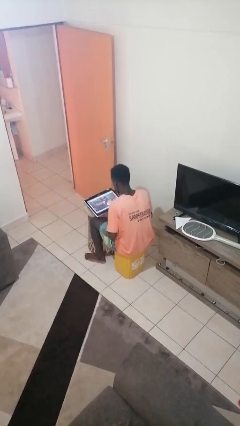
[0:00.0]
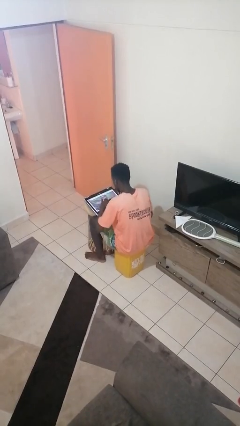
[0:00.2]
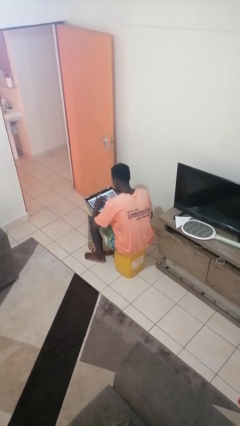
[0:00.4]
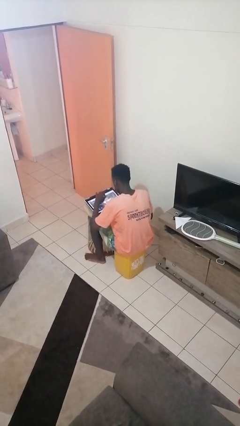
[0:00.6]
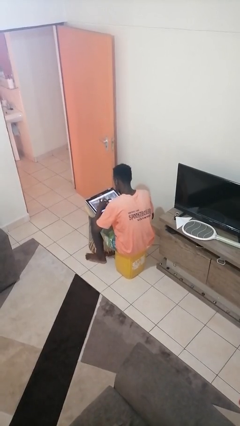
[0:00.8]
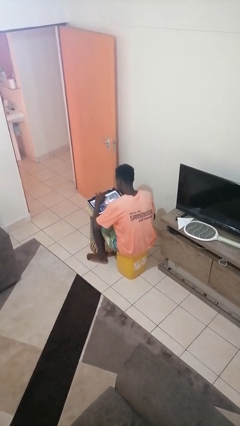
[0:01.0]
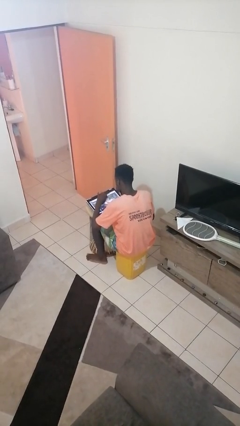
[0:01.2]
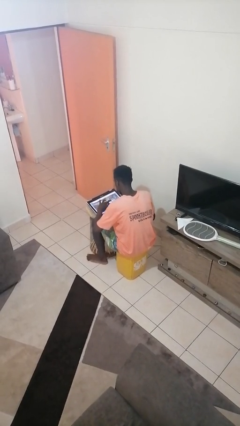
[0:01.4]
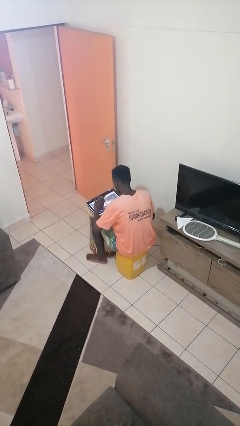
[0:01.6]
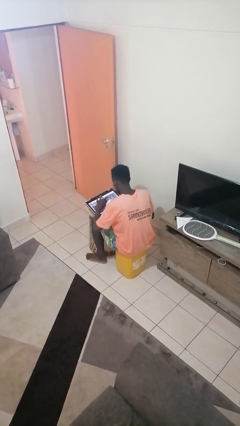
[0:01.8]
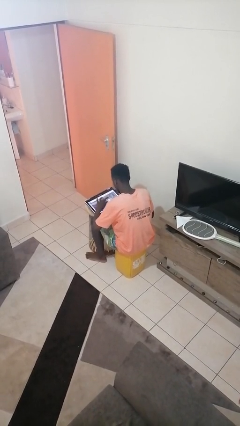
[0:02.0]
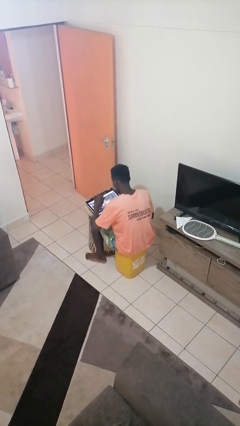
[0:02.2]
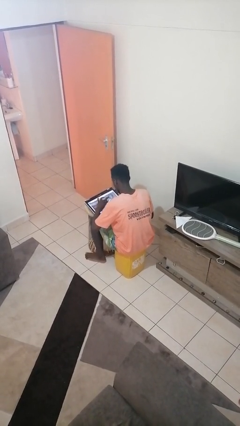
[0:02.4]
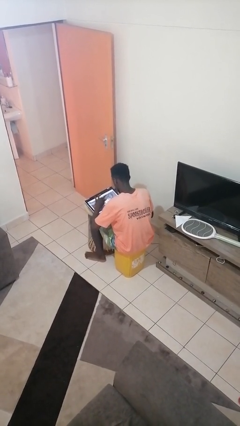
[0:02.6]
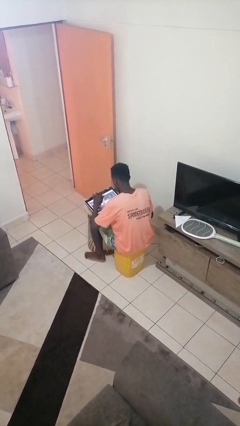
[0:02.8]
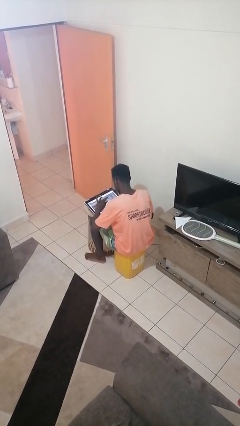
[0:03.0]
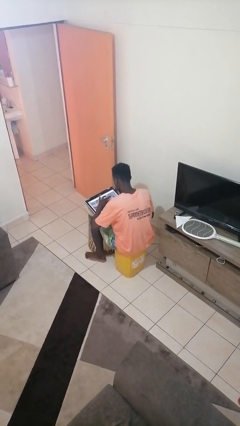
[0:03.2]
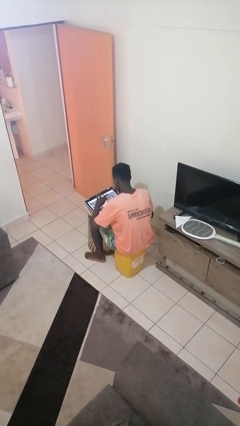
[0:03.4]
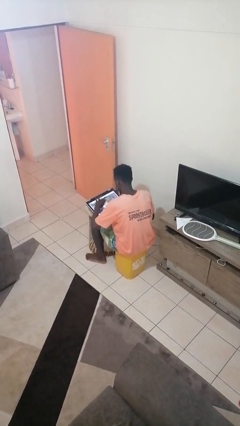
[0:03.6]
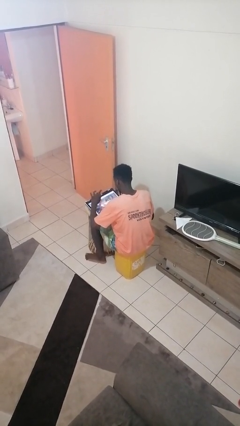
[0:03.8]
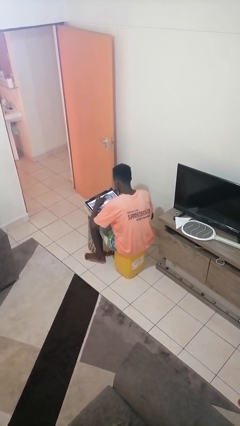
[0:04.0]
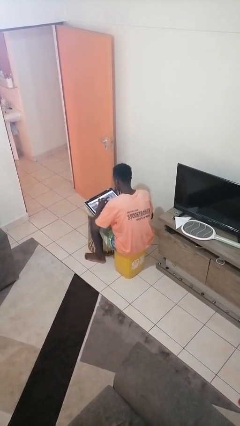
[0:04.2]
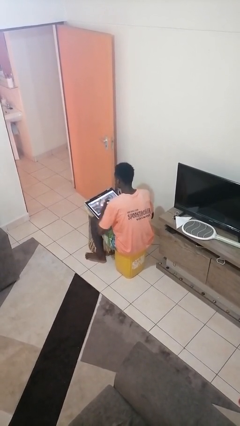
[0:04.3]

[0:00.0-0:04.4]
person interacts with tablet

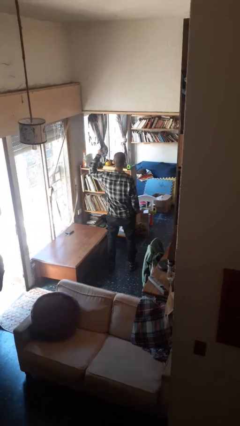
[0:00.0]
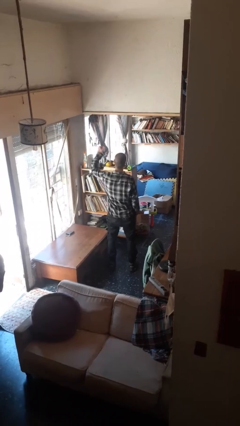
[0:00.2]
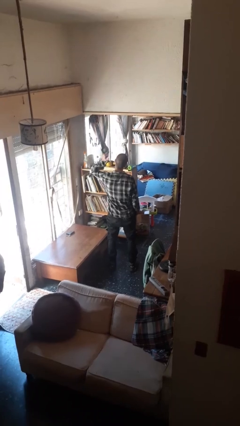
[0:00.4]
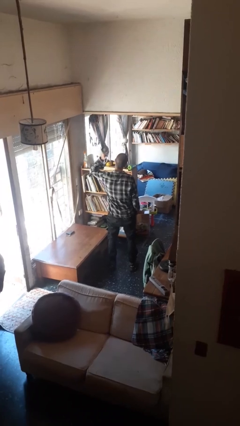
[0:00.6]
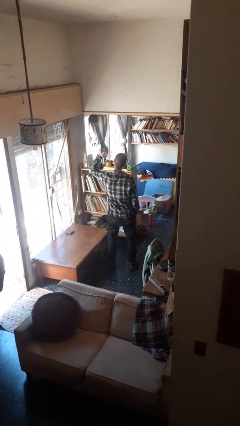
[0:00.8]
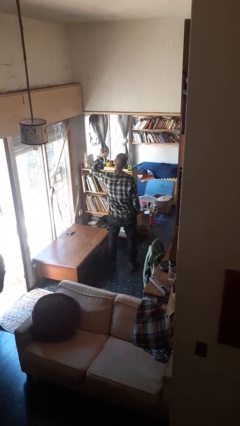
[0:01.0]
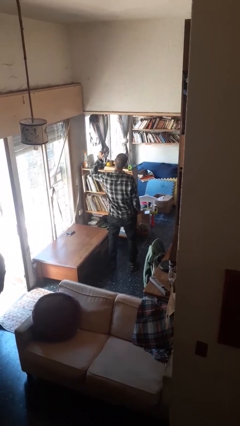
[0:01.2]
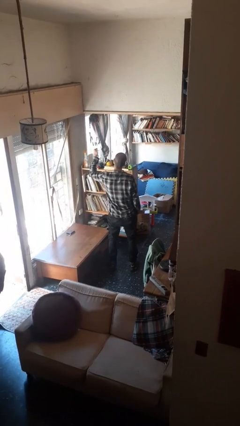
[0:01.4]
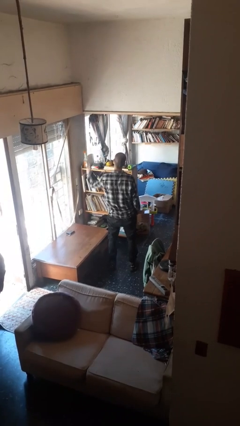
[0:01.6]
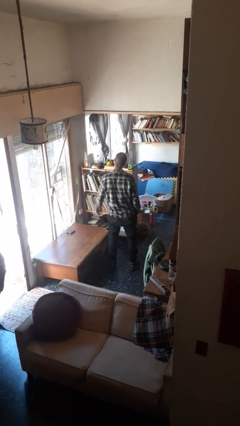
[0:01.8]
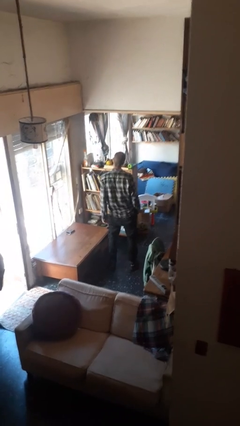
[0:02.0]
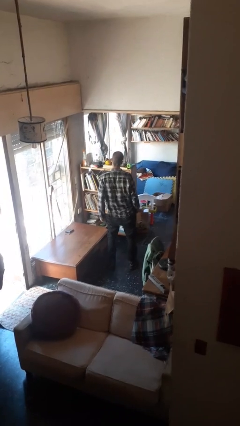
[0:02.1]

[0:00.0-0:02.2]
person gestures behind me

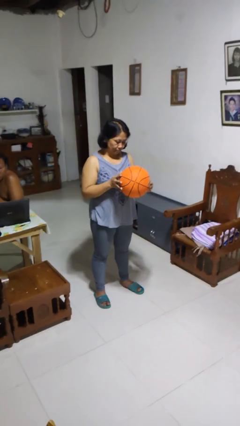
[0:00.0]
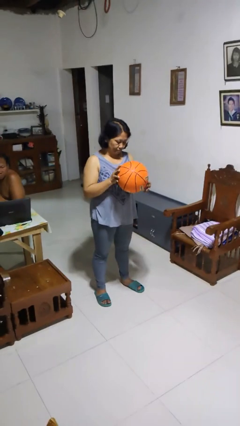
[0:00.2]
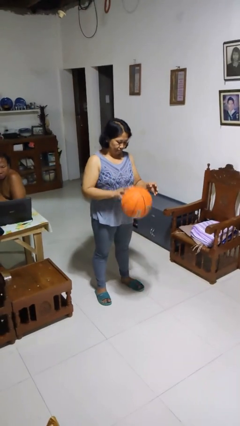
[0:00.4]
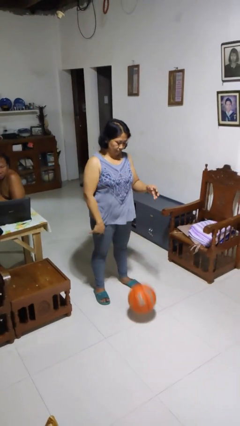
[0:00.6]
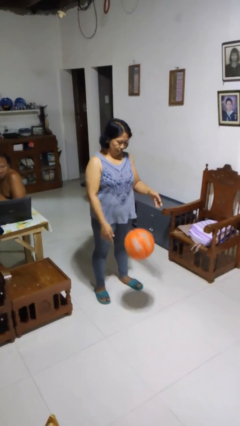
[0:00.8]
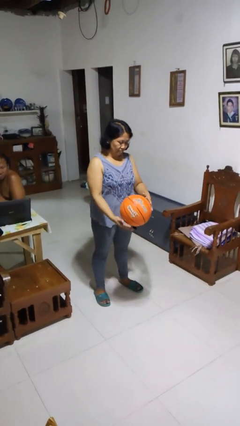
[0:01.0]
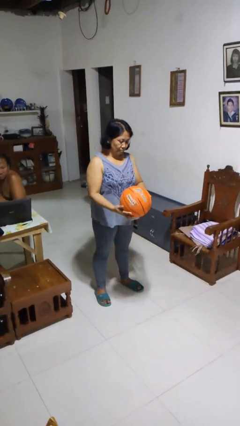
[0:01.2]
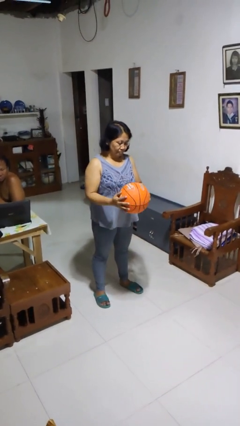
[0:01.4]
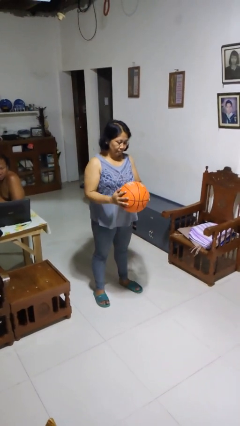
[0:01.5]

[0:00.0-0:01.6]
person bounces ball on floor

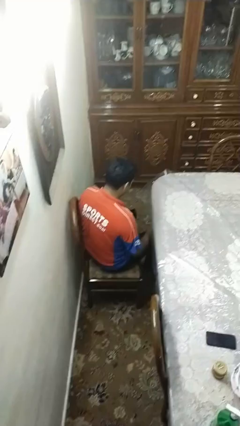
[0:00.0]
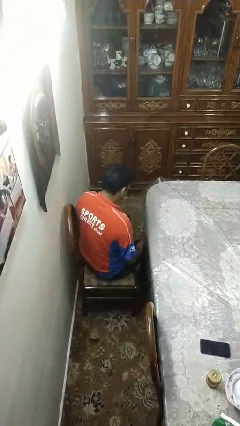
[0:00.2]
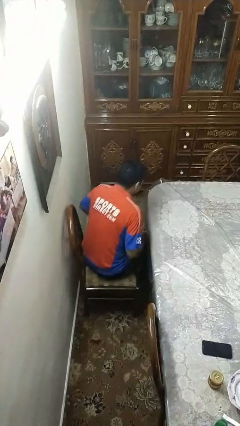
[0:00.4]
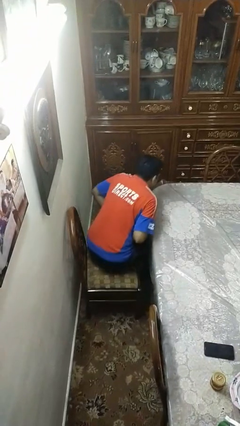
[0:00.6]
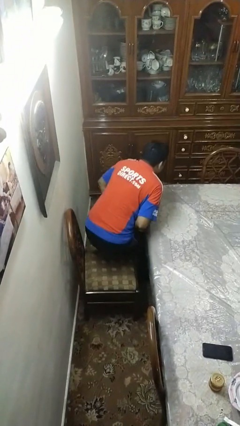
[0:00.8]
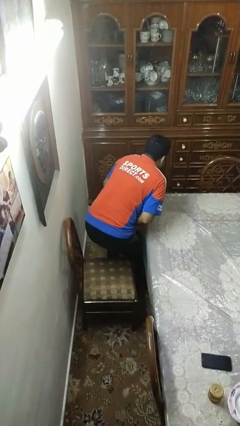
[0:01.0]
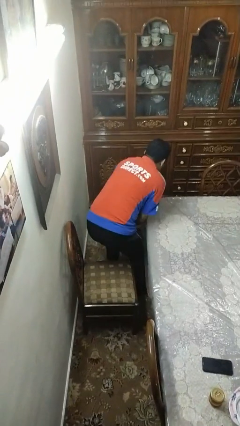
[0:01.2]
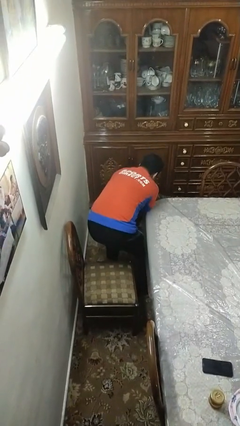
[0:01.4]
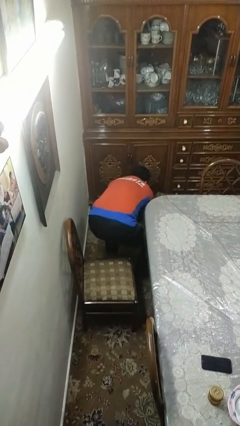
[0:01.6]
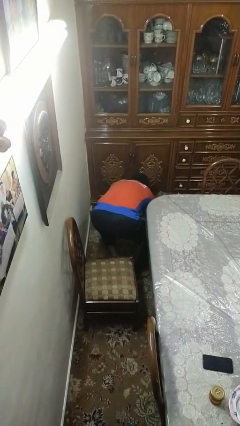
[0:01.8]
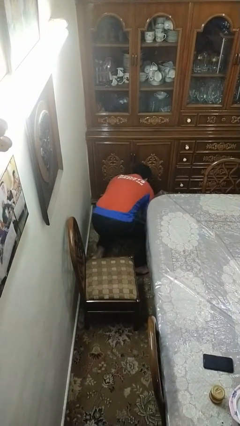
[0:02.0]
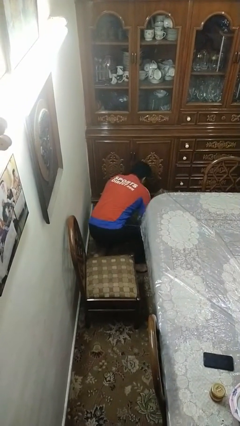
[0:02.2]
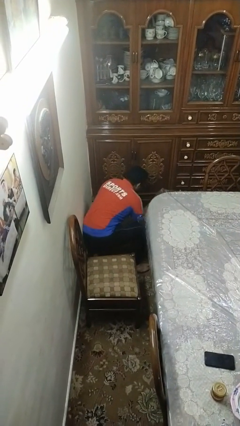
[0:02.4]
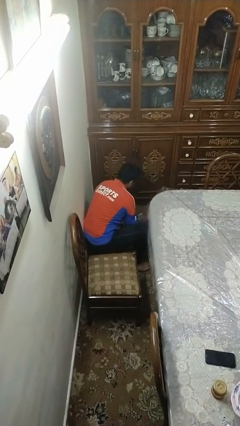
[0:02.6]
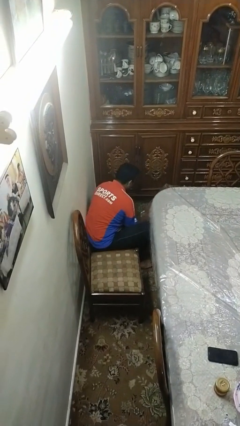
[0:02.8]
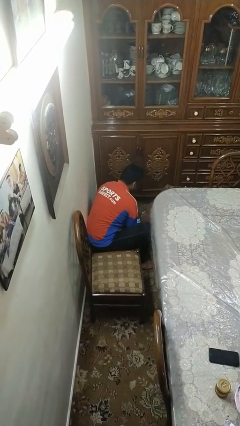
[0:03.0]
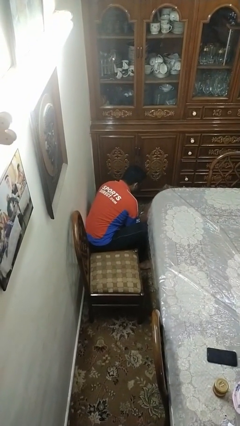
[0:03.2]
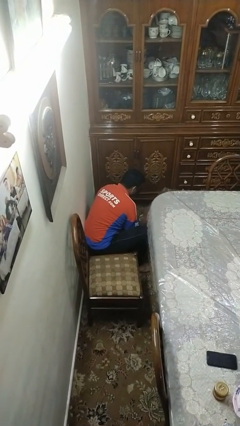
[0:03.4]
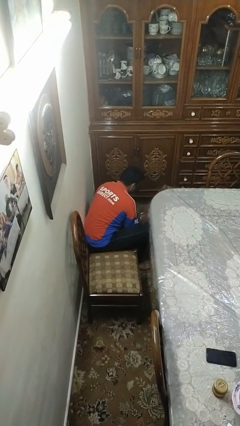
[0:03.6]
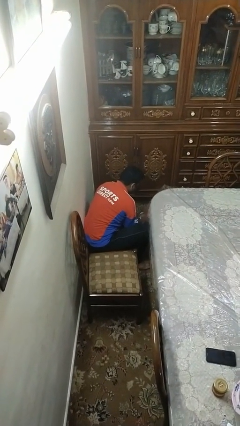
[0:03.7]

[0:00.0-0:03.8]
person falls from chair

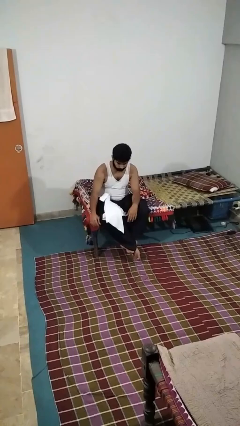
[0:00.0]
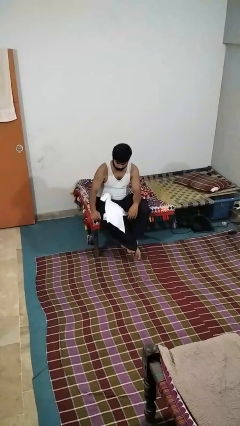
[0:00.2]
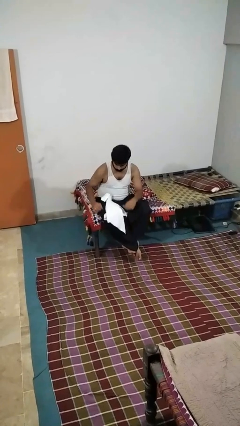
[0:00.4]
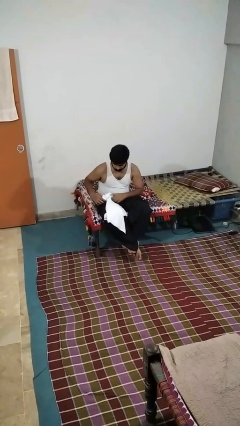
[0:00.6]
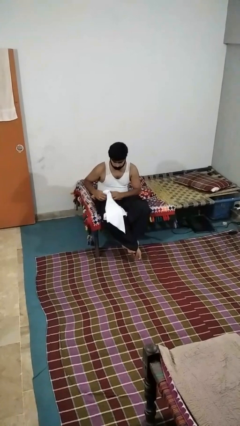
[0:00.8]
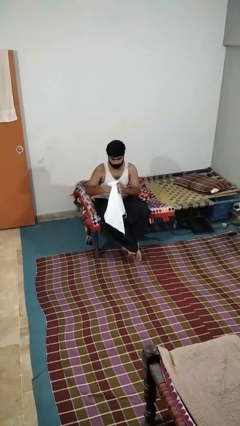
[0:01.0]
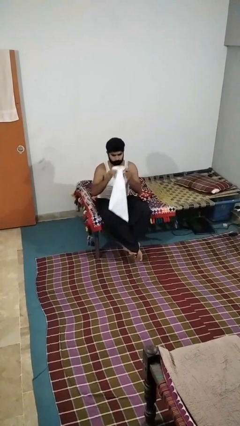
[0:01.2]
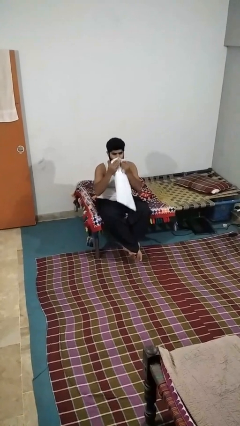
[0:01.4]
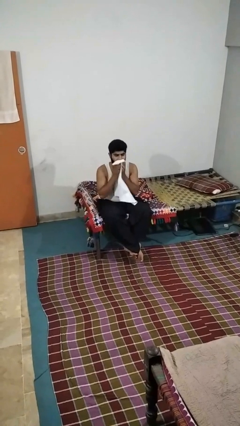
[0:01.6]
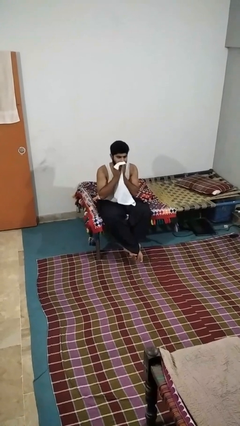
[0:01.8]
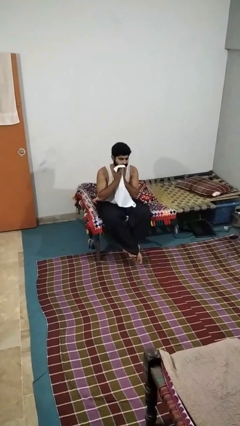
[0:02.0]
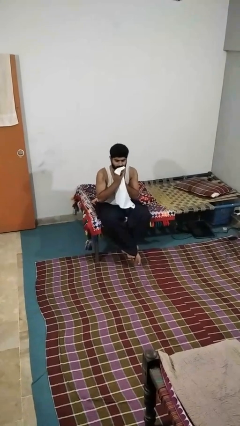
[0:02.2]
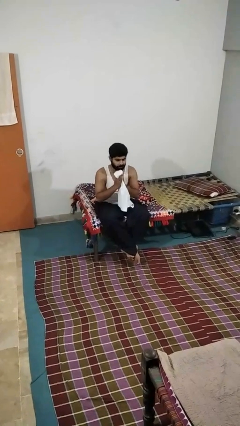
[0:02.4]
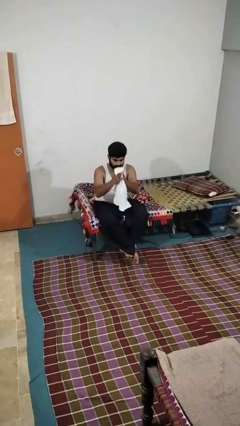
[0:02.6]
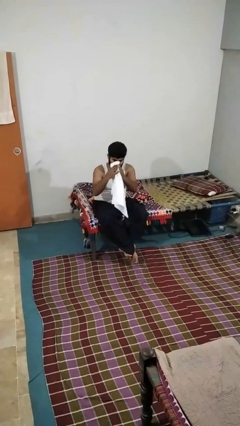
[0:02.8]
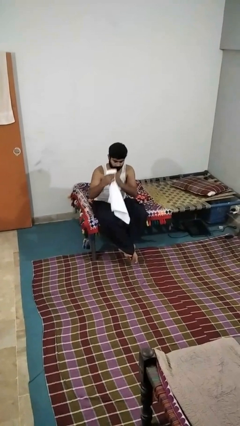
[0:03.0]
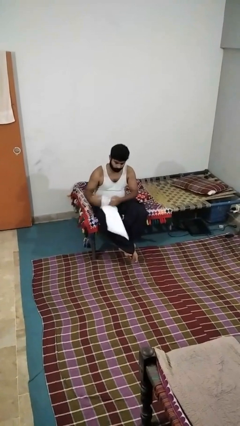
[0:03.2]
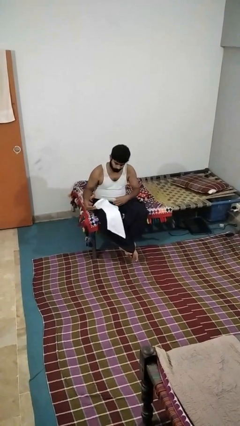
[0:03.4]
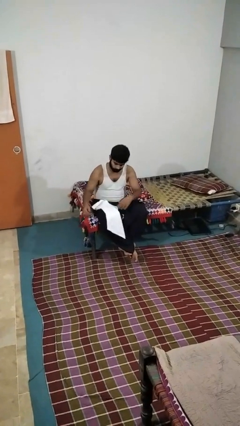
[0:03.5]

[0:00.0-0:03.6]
person wipes mouth with napkin

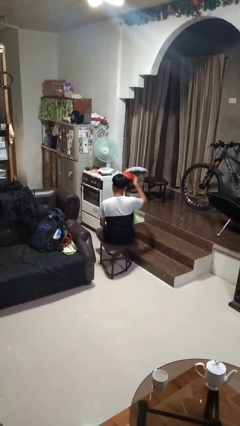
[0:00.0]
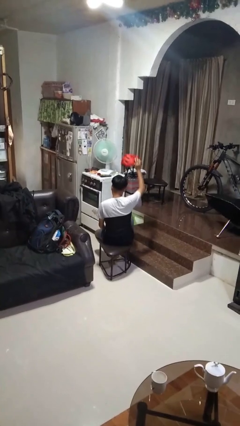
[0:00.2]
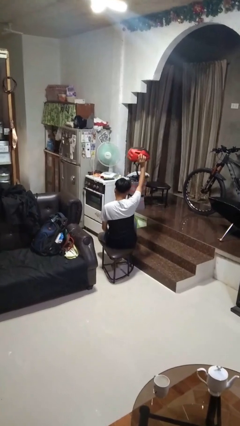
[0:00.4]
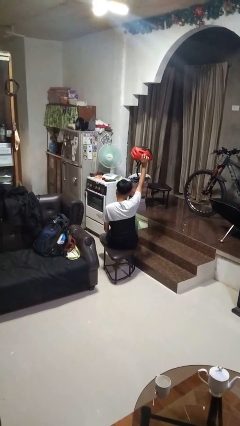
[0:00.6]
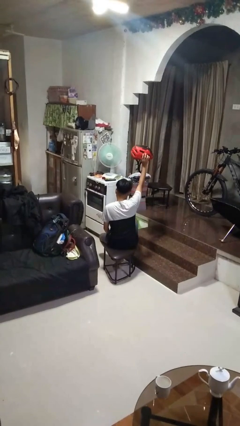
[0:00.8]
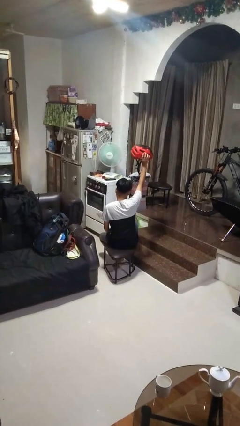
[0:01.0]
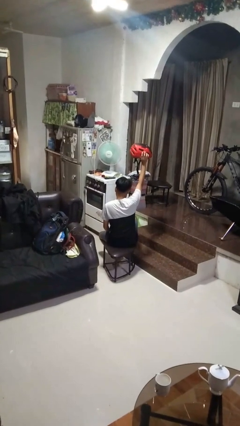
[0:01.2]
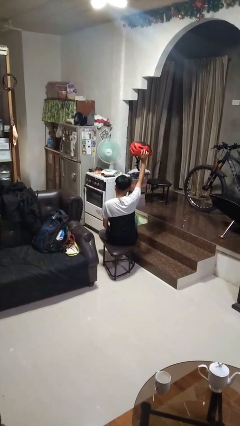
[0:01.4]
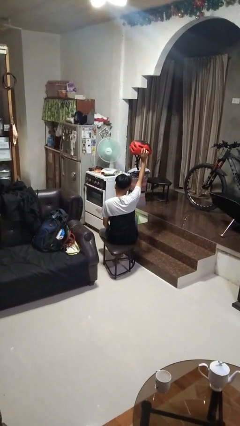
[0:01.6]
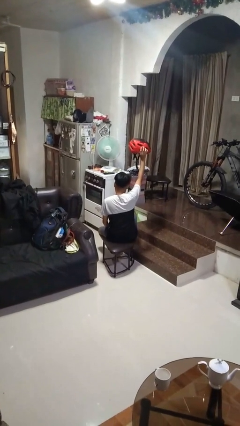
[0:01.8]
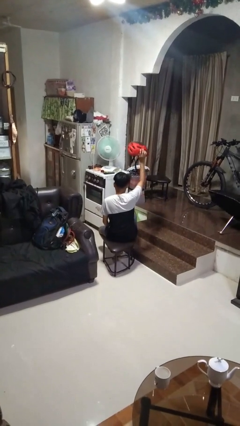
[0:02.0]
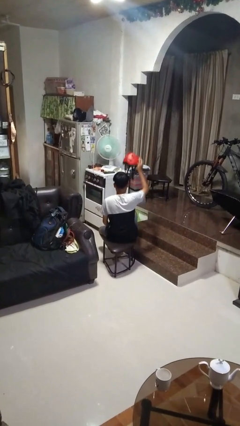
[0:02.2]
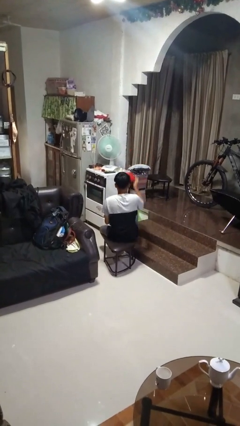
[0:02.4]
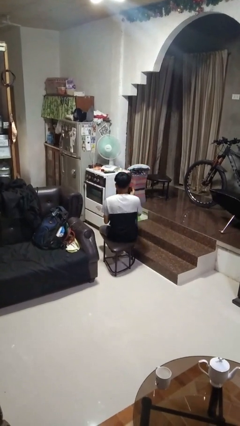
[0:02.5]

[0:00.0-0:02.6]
person holds object above head
